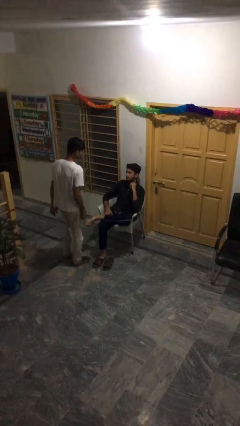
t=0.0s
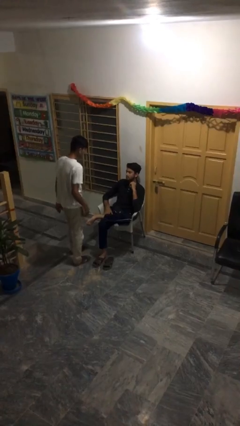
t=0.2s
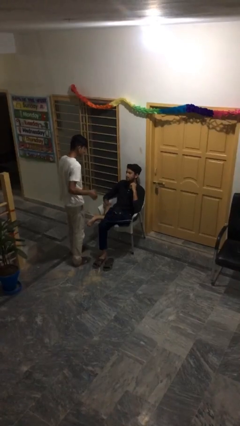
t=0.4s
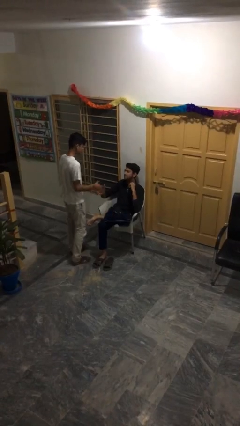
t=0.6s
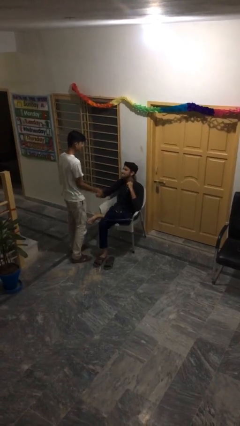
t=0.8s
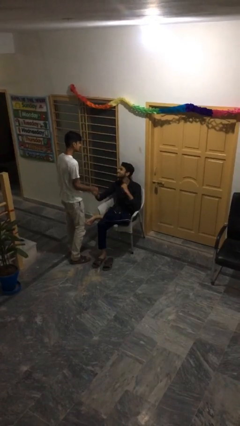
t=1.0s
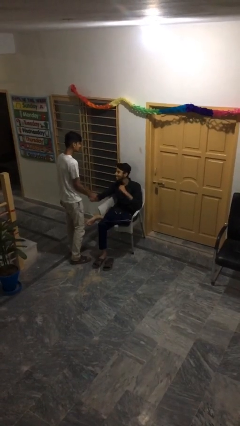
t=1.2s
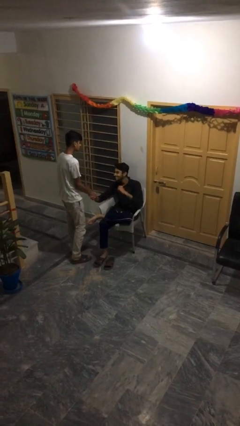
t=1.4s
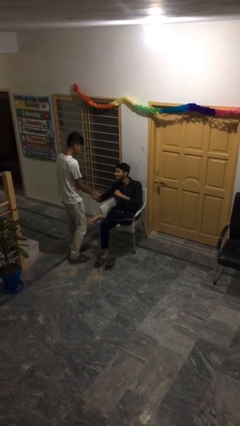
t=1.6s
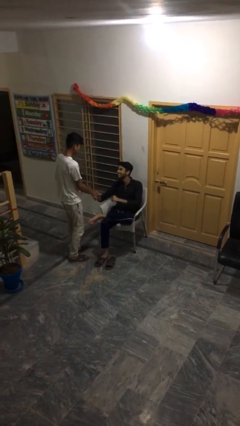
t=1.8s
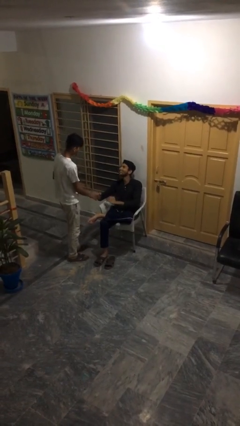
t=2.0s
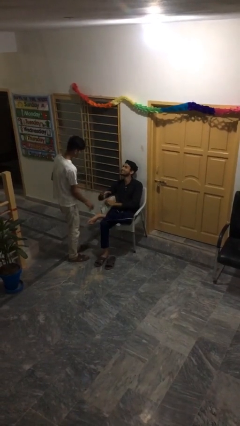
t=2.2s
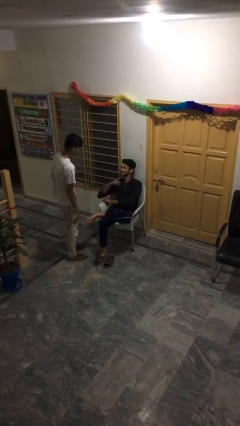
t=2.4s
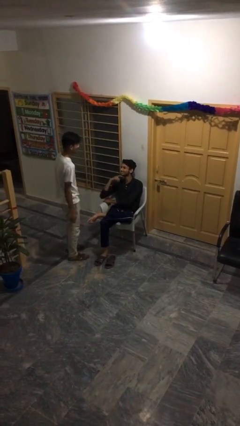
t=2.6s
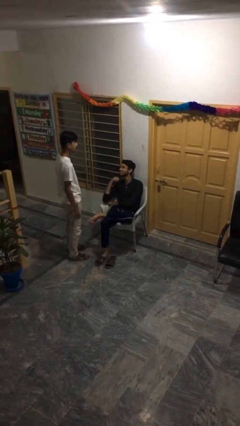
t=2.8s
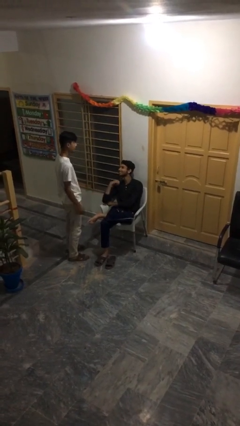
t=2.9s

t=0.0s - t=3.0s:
person shakes hand

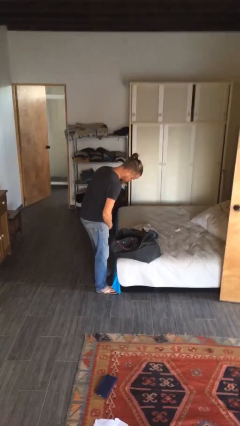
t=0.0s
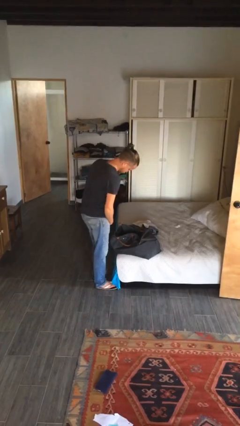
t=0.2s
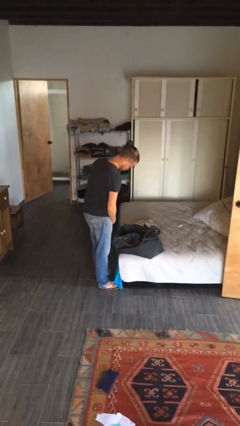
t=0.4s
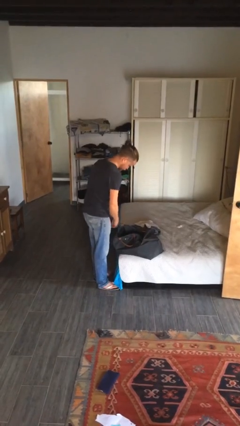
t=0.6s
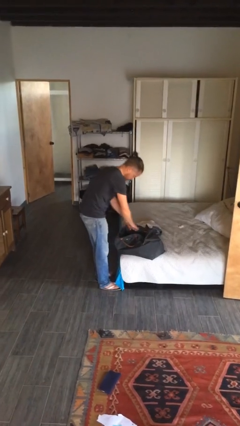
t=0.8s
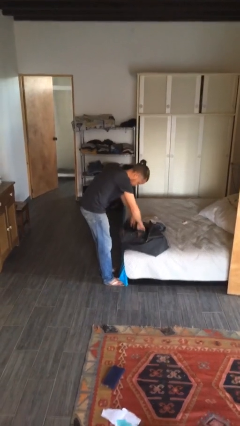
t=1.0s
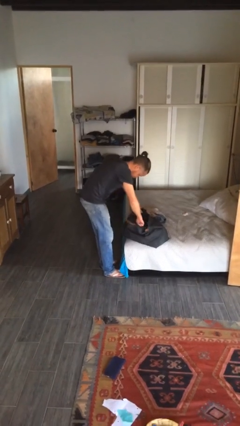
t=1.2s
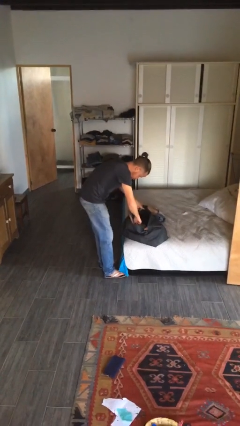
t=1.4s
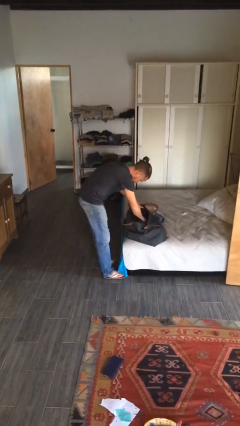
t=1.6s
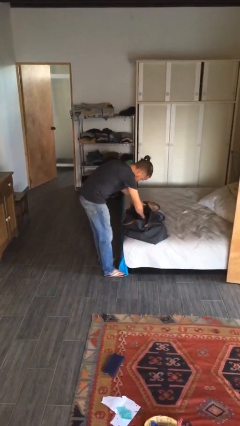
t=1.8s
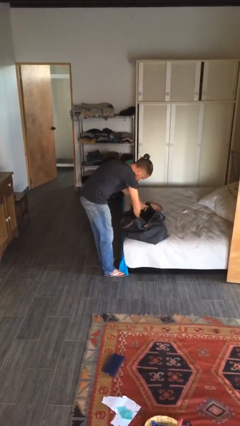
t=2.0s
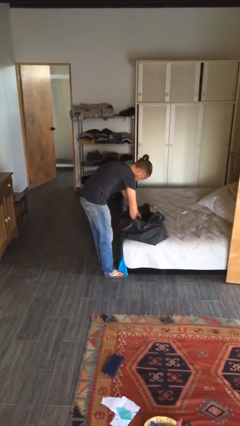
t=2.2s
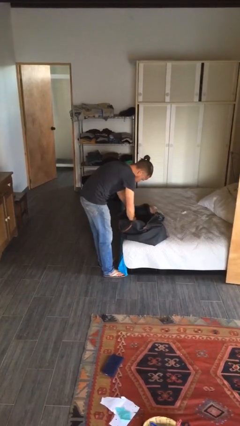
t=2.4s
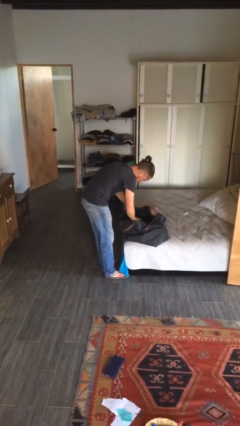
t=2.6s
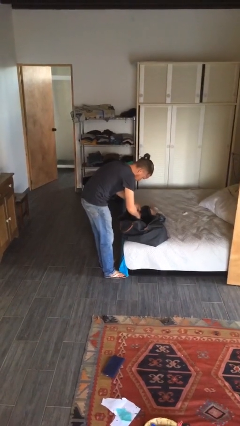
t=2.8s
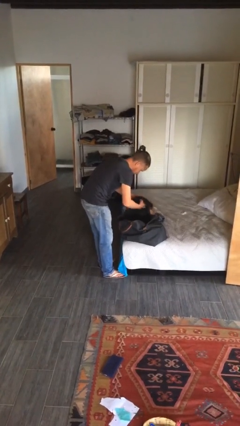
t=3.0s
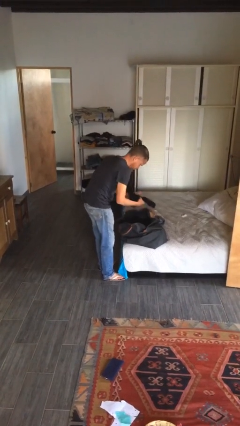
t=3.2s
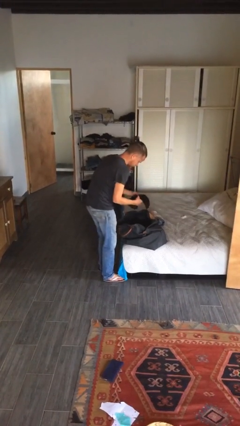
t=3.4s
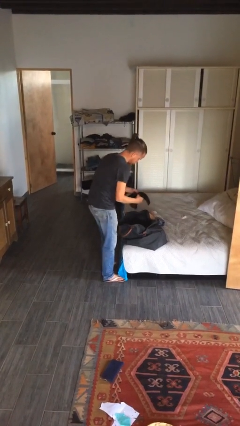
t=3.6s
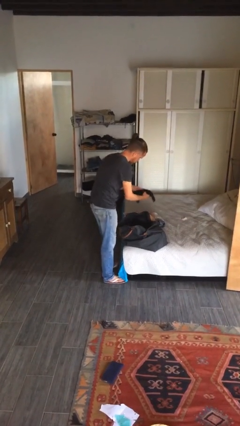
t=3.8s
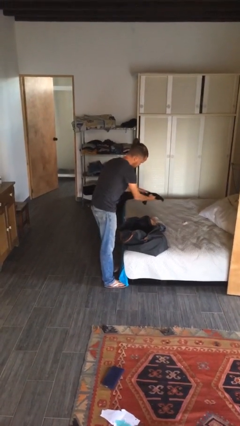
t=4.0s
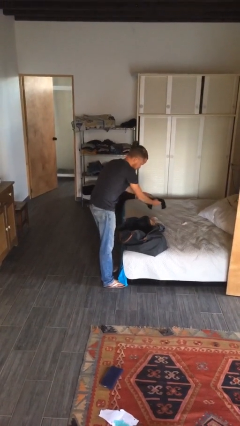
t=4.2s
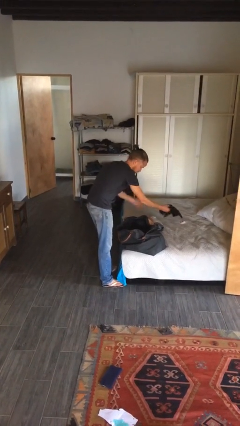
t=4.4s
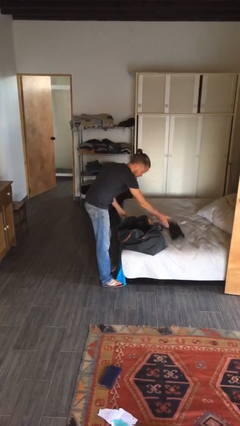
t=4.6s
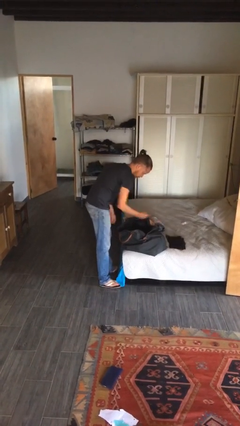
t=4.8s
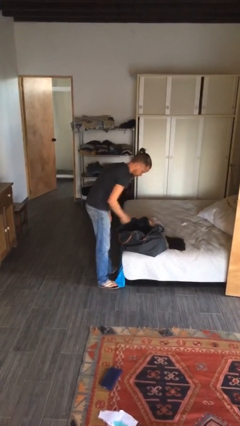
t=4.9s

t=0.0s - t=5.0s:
person unloads clothes from suitcase

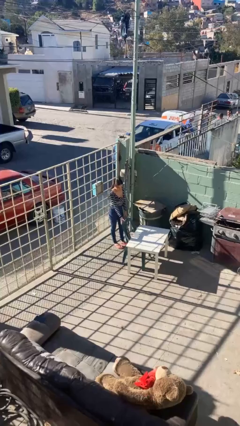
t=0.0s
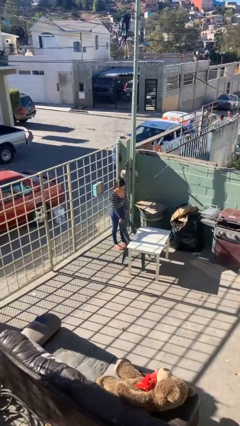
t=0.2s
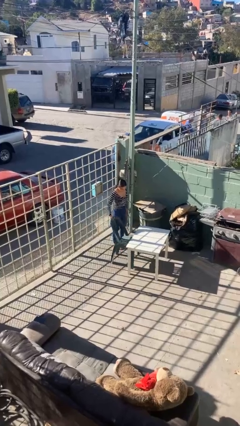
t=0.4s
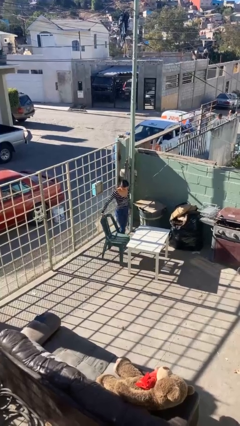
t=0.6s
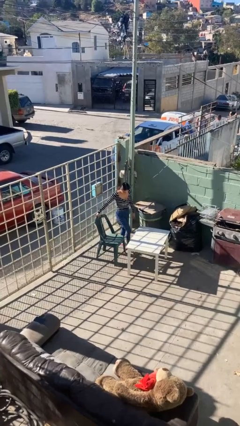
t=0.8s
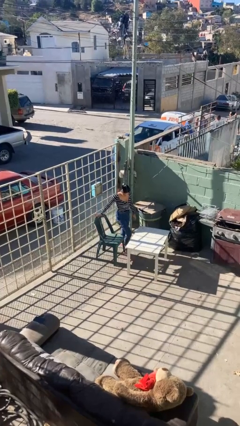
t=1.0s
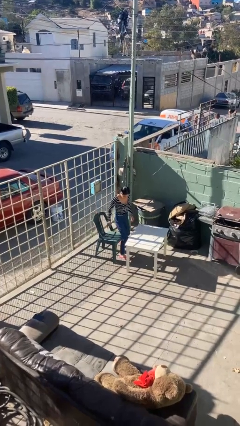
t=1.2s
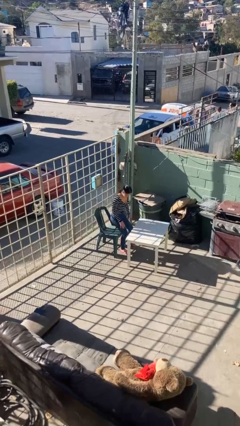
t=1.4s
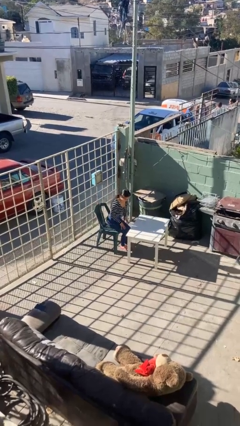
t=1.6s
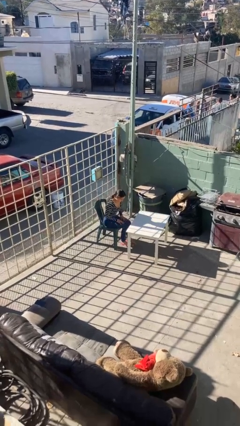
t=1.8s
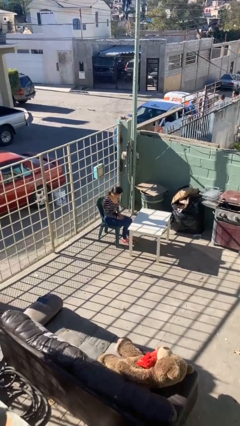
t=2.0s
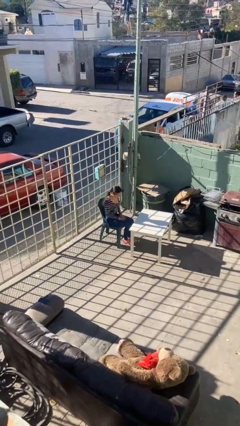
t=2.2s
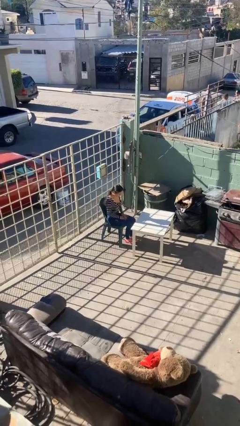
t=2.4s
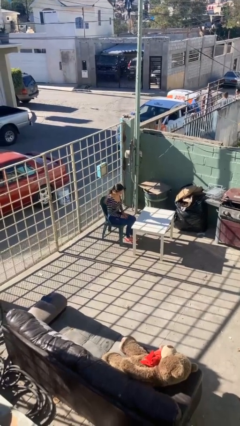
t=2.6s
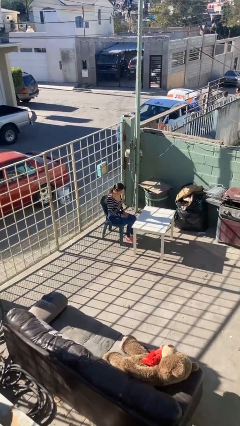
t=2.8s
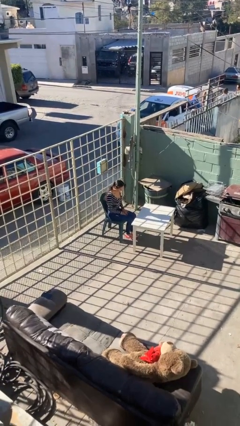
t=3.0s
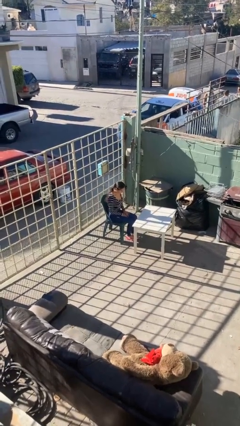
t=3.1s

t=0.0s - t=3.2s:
person sits down

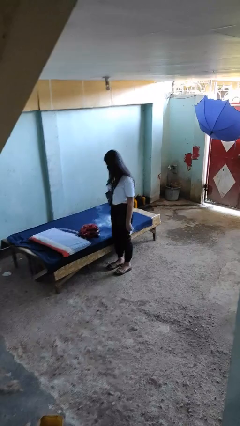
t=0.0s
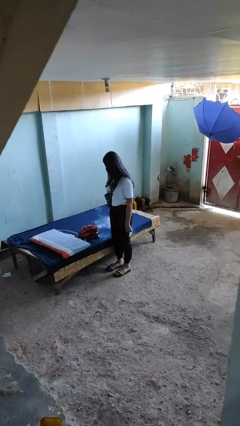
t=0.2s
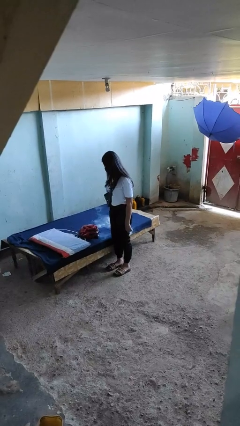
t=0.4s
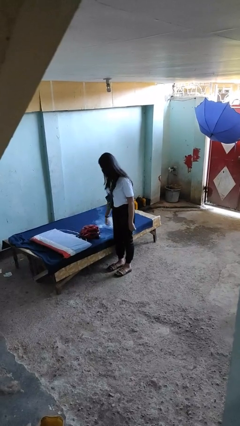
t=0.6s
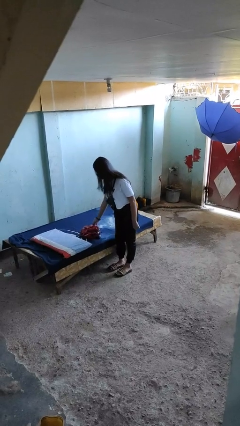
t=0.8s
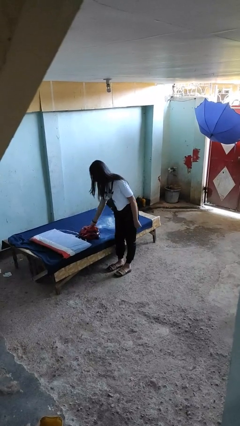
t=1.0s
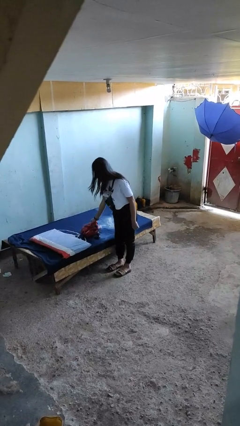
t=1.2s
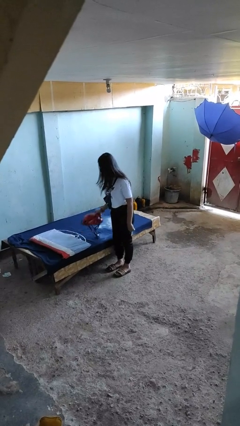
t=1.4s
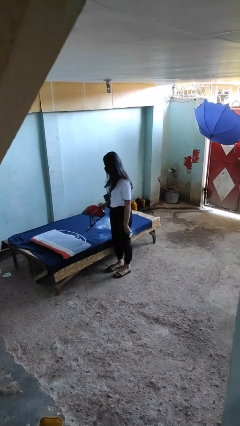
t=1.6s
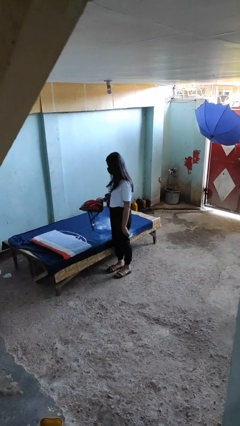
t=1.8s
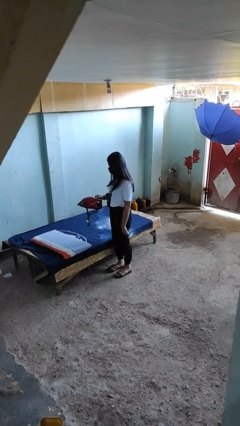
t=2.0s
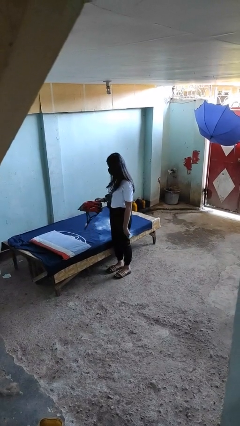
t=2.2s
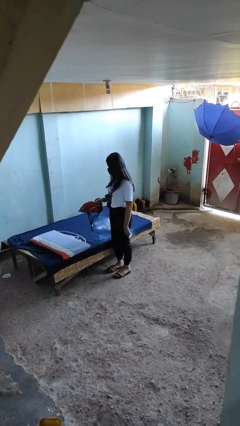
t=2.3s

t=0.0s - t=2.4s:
person picks up object from bed

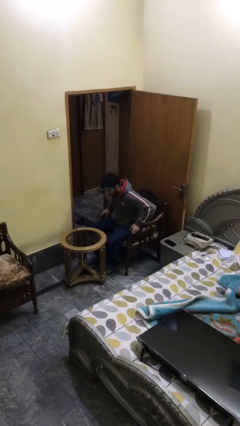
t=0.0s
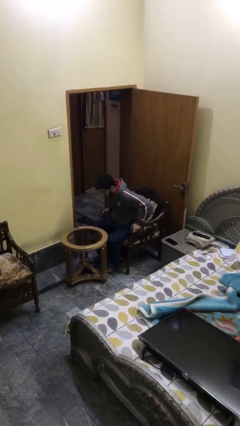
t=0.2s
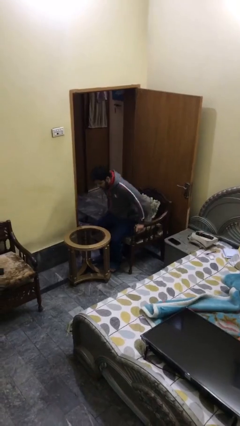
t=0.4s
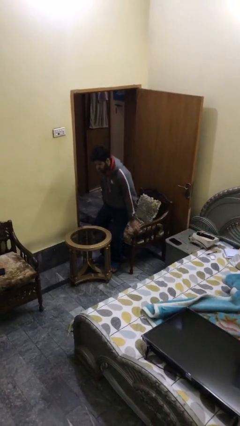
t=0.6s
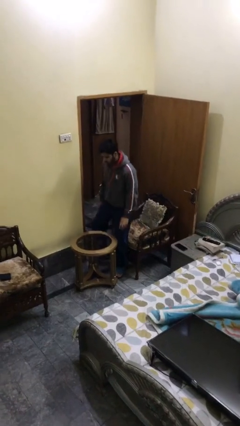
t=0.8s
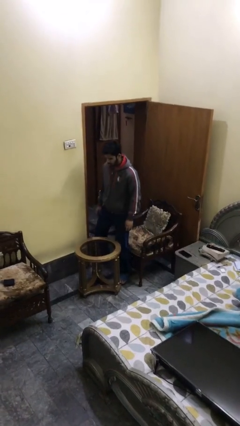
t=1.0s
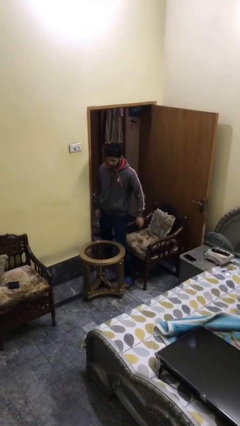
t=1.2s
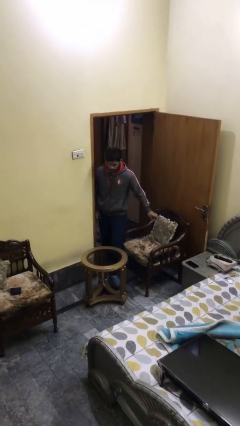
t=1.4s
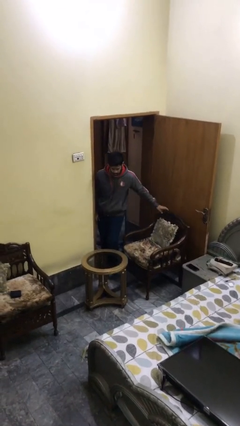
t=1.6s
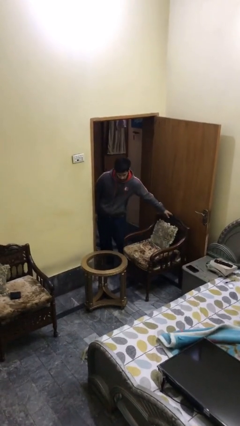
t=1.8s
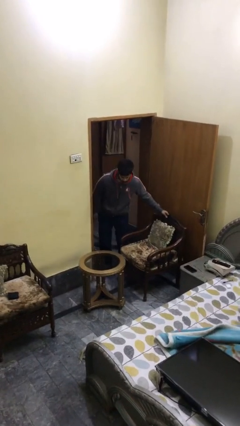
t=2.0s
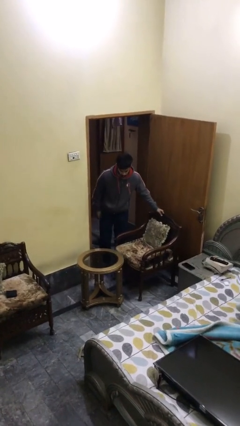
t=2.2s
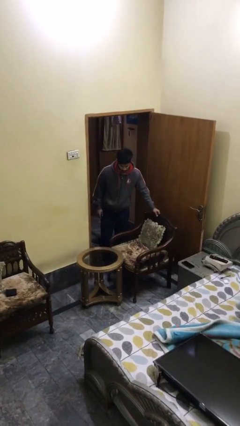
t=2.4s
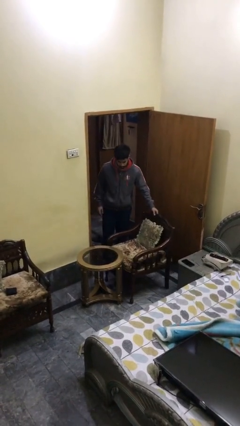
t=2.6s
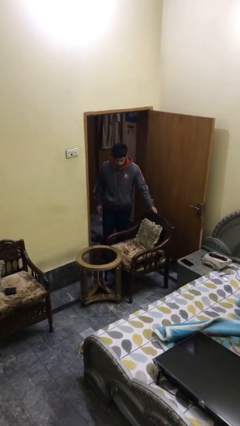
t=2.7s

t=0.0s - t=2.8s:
person stands up

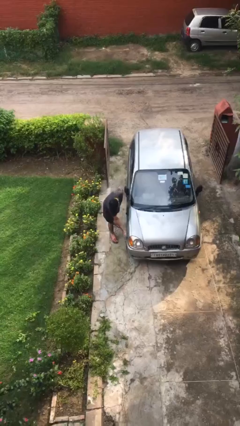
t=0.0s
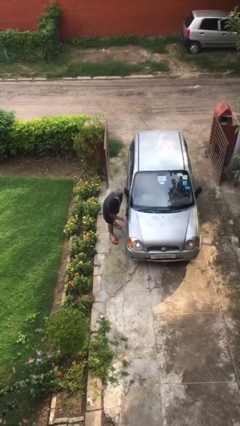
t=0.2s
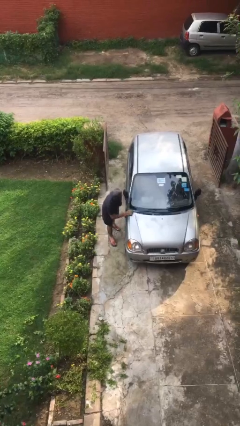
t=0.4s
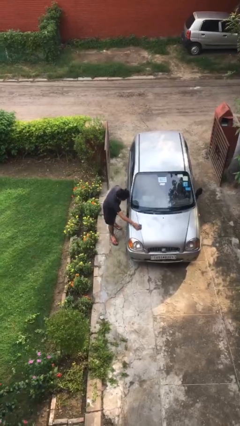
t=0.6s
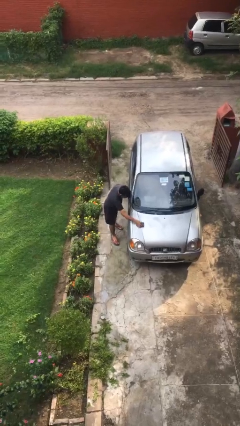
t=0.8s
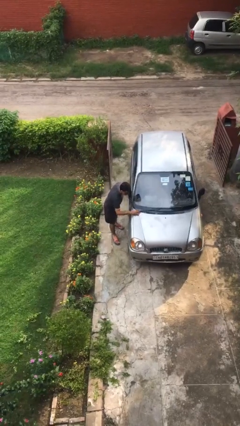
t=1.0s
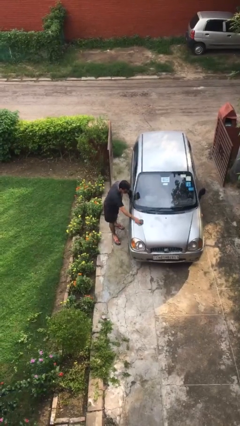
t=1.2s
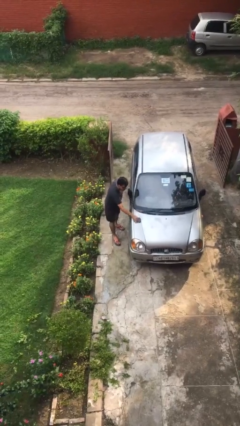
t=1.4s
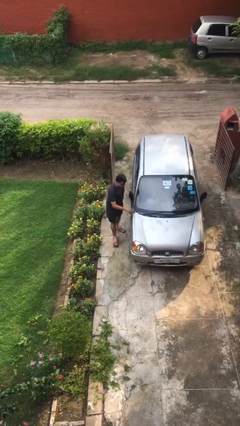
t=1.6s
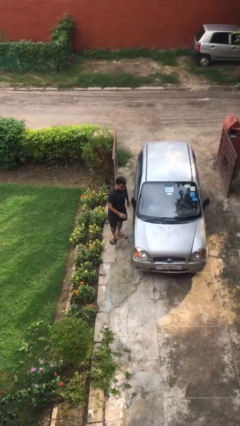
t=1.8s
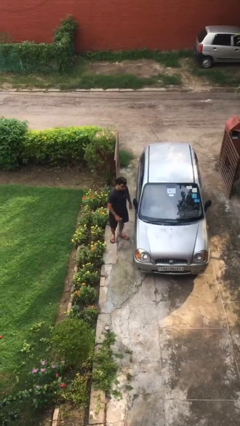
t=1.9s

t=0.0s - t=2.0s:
person polishes car with rag
